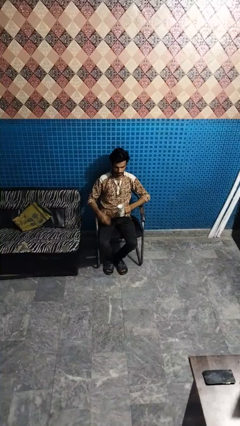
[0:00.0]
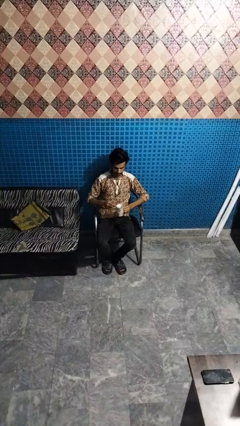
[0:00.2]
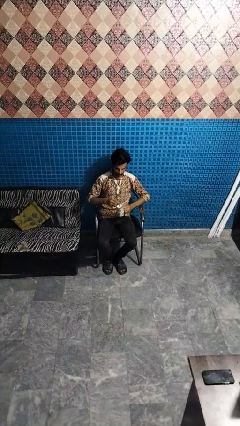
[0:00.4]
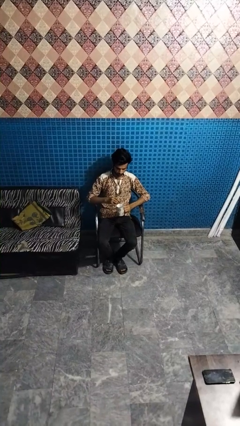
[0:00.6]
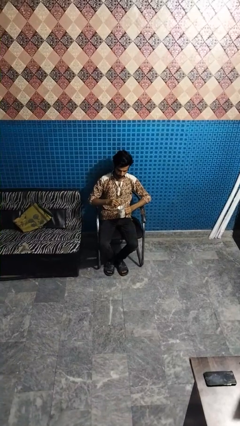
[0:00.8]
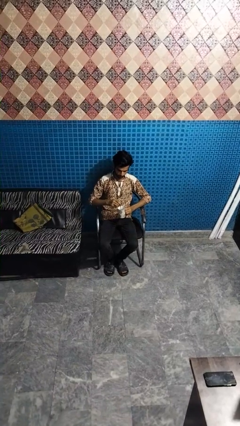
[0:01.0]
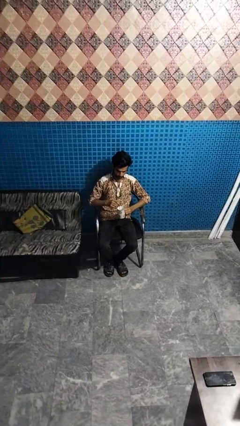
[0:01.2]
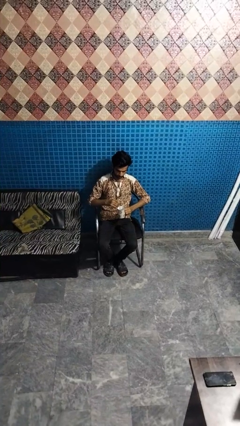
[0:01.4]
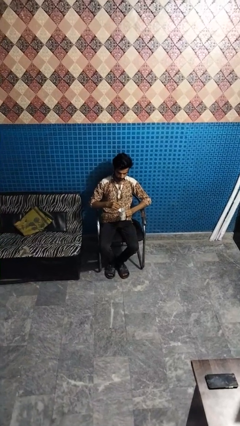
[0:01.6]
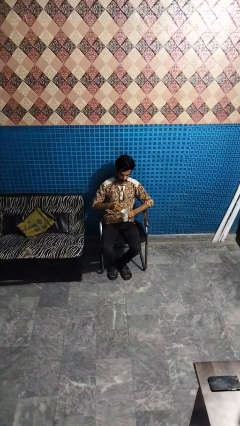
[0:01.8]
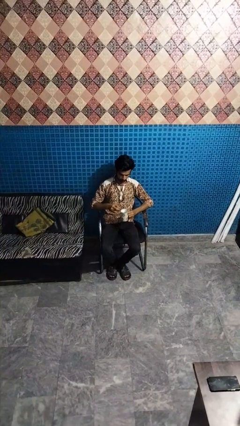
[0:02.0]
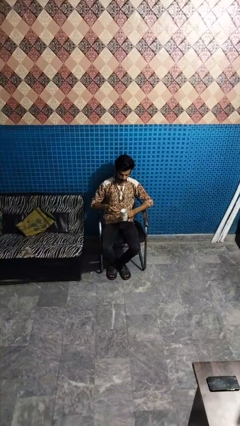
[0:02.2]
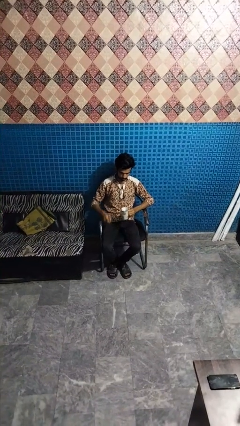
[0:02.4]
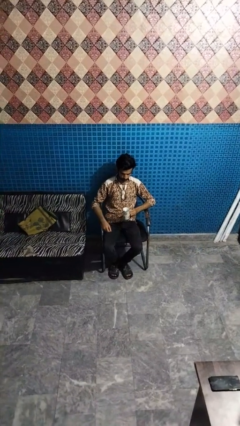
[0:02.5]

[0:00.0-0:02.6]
person stirs mug

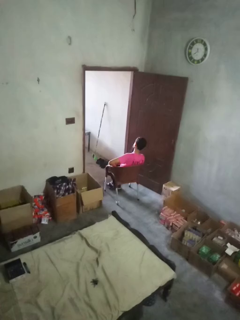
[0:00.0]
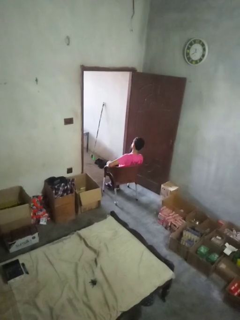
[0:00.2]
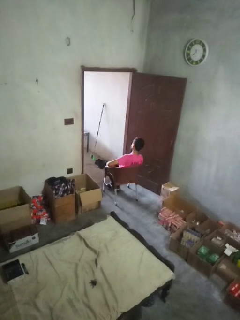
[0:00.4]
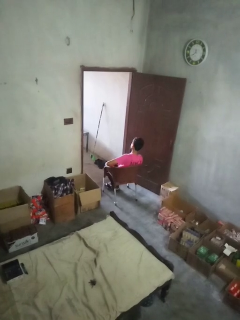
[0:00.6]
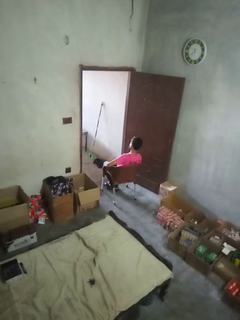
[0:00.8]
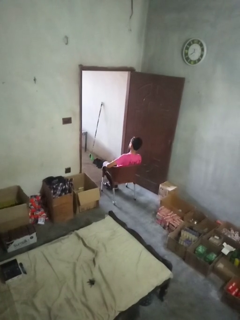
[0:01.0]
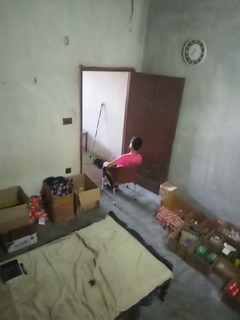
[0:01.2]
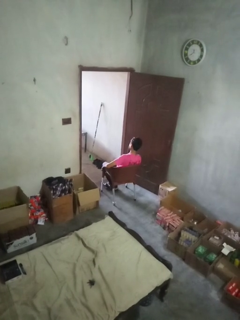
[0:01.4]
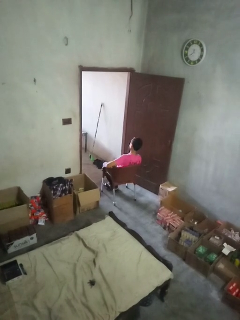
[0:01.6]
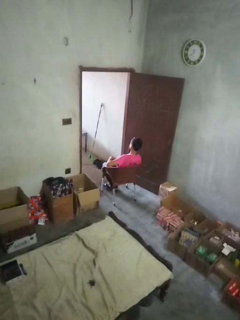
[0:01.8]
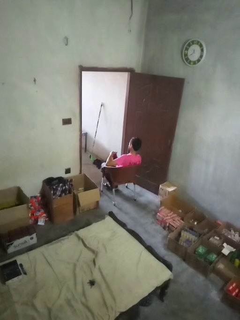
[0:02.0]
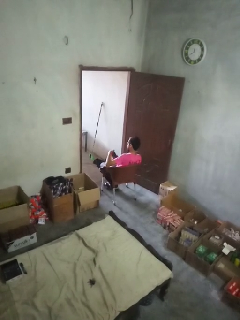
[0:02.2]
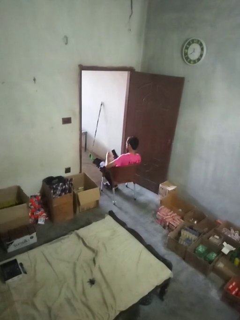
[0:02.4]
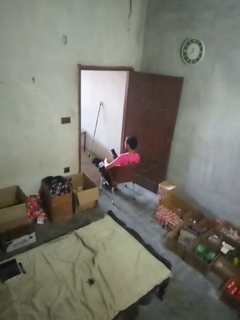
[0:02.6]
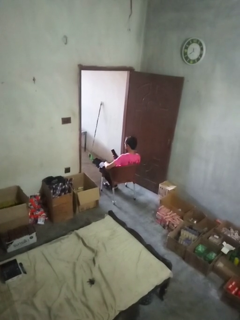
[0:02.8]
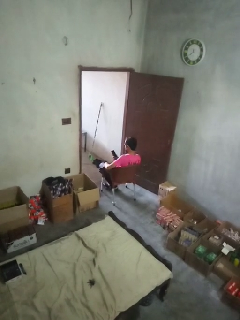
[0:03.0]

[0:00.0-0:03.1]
person takes phone from pocket

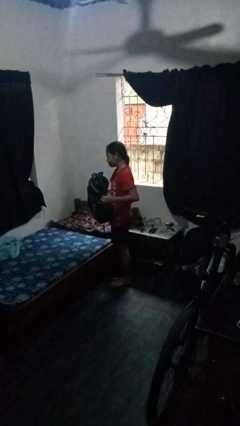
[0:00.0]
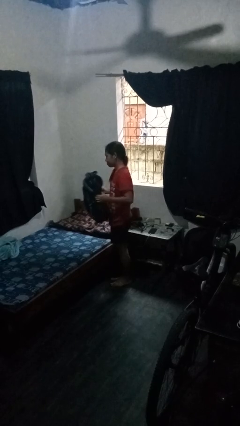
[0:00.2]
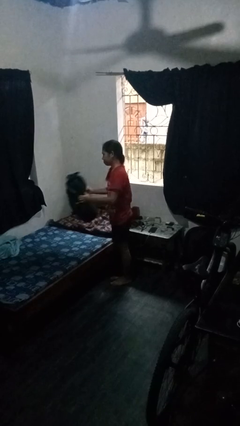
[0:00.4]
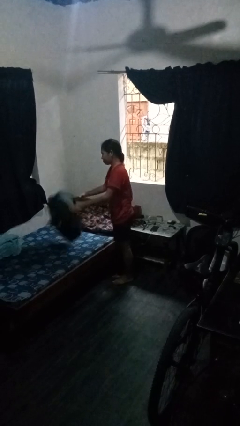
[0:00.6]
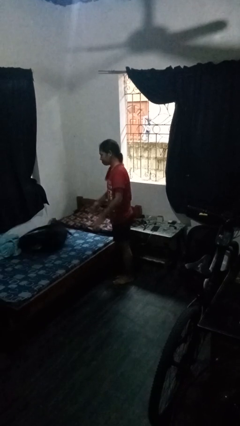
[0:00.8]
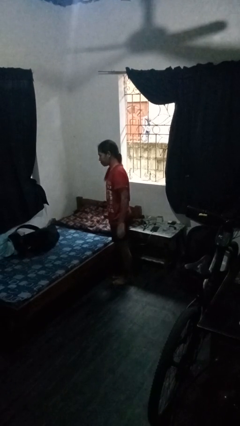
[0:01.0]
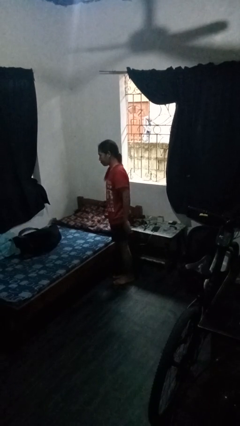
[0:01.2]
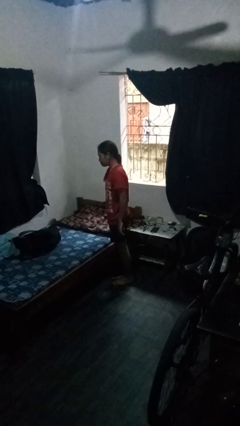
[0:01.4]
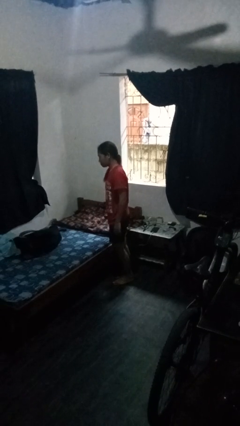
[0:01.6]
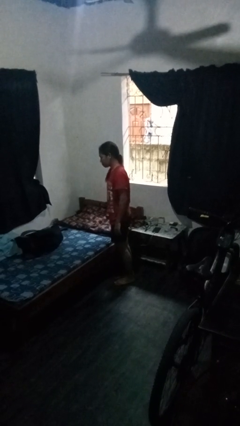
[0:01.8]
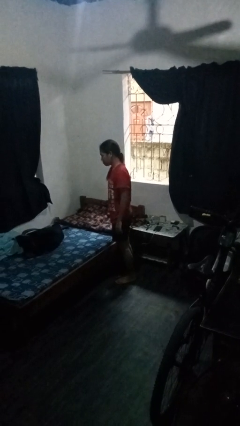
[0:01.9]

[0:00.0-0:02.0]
person throws object on bed

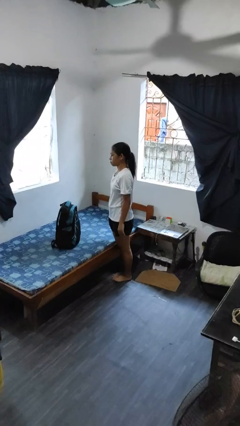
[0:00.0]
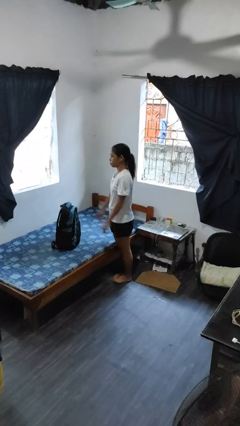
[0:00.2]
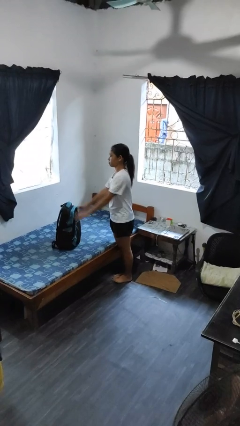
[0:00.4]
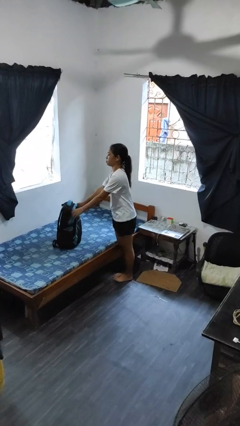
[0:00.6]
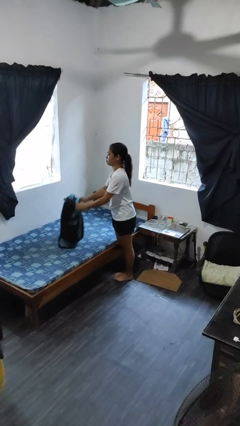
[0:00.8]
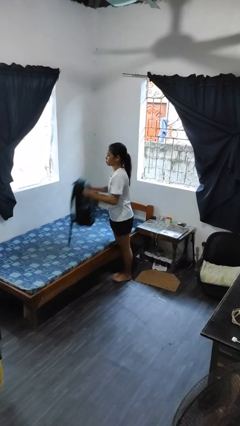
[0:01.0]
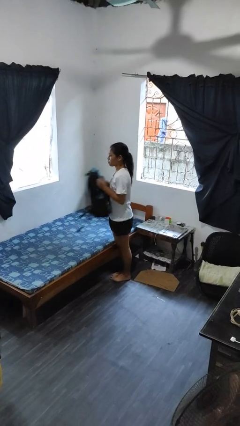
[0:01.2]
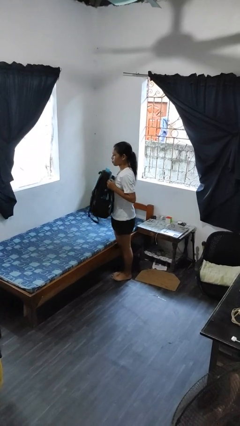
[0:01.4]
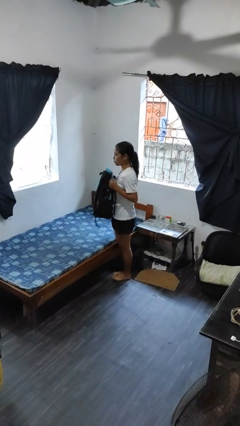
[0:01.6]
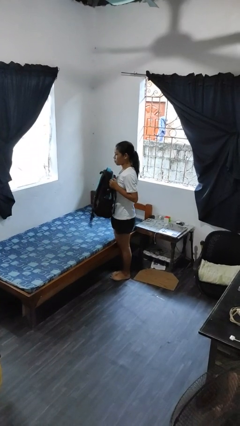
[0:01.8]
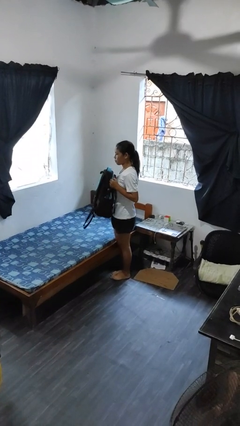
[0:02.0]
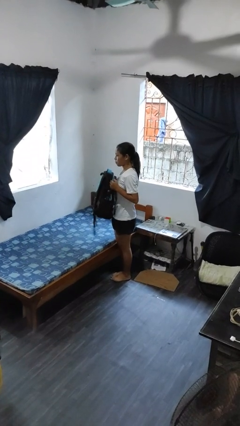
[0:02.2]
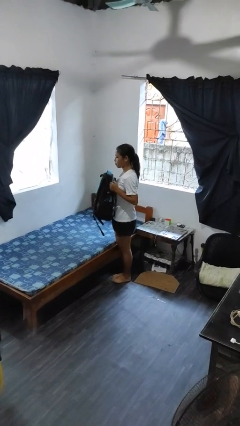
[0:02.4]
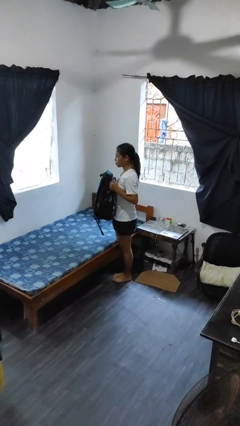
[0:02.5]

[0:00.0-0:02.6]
person picks up object from bed

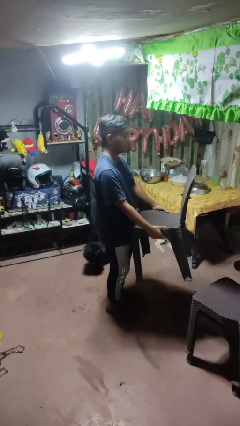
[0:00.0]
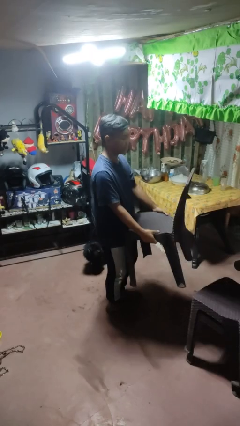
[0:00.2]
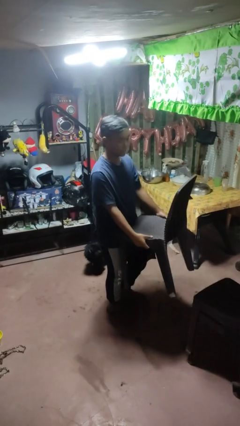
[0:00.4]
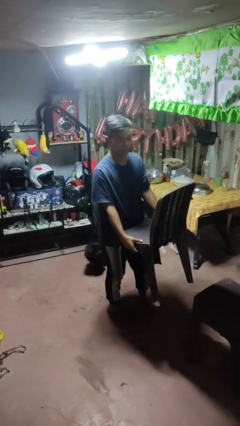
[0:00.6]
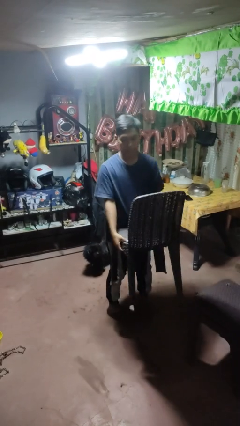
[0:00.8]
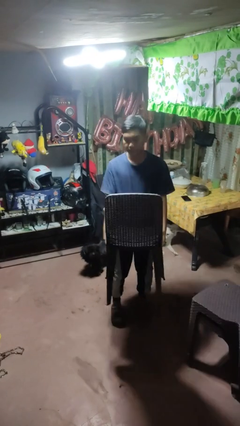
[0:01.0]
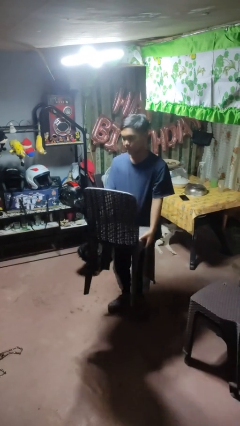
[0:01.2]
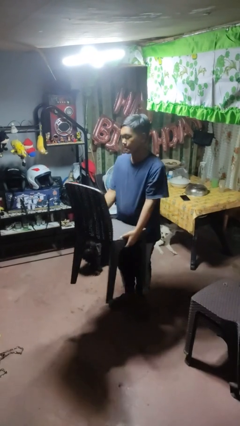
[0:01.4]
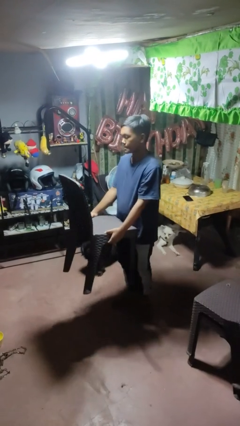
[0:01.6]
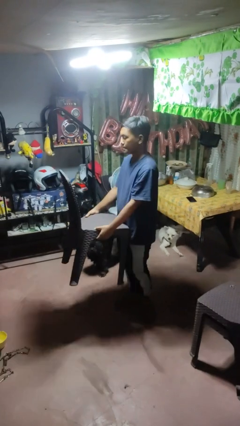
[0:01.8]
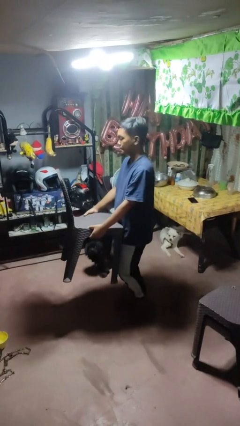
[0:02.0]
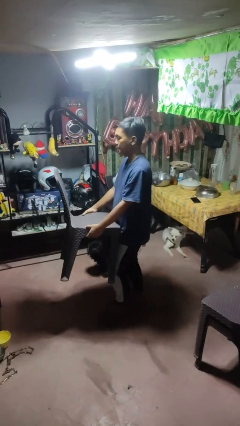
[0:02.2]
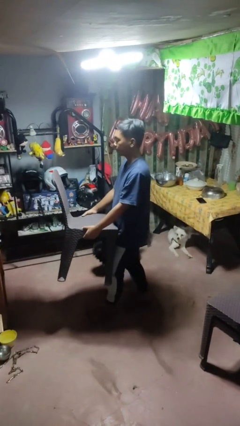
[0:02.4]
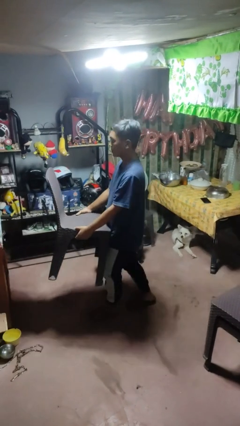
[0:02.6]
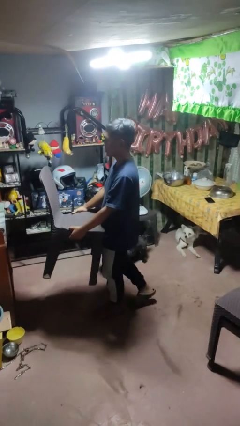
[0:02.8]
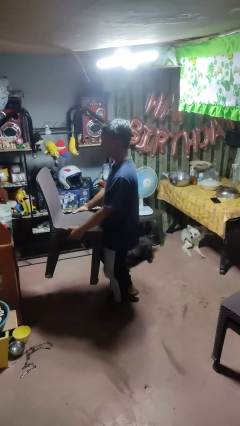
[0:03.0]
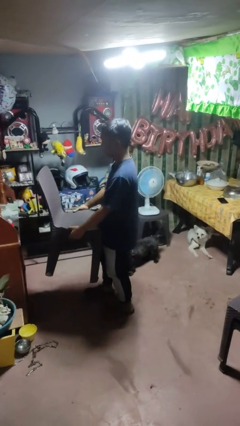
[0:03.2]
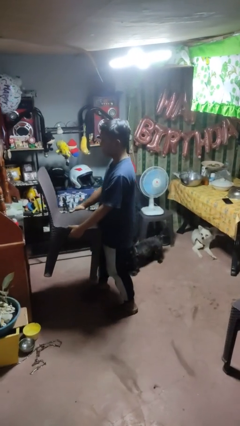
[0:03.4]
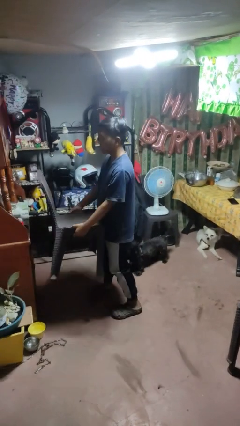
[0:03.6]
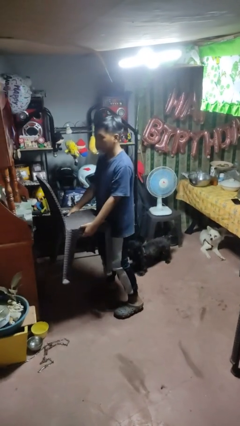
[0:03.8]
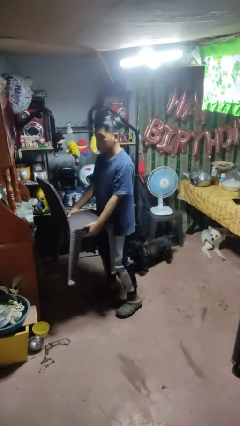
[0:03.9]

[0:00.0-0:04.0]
person carries furniture

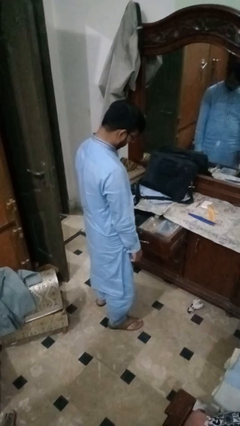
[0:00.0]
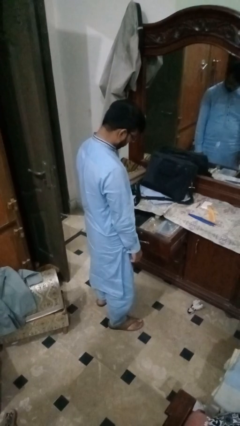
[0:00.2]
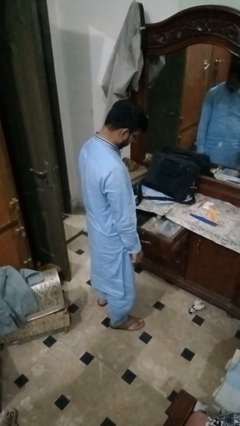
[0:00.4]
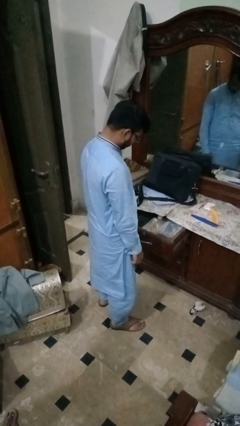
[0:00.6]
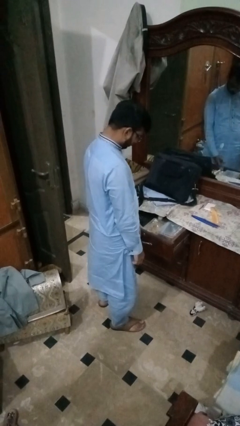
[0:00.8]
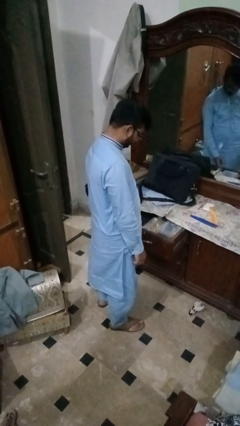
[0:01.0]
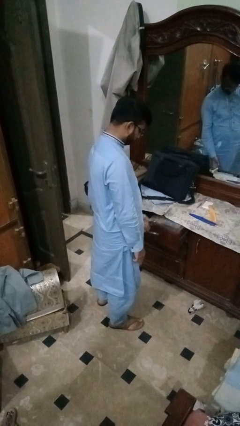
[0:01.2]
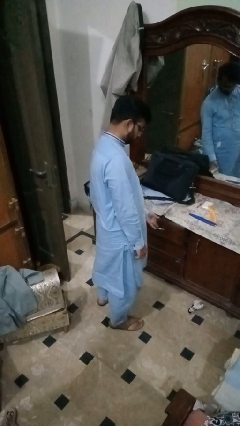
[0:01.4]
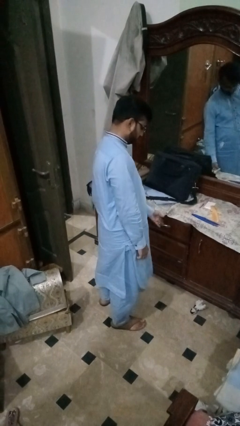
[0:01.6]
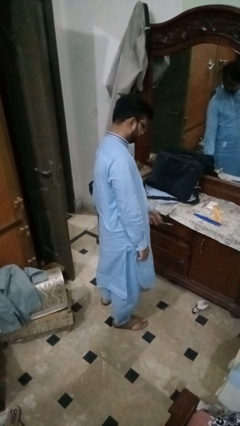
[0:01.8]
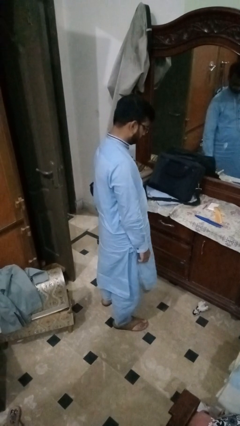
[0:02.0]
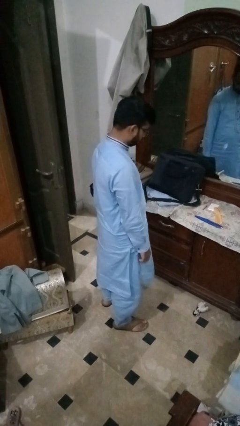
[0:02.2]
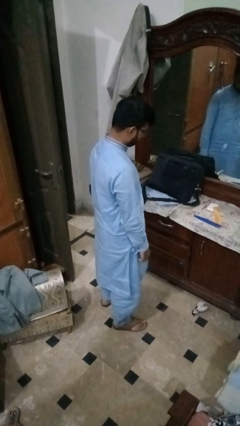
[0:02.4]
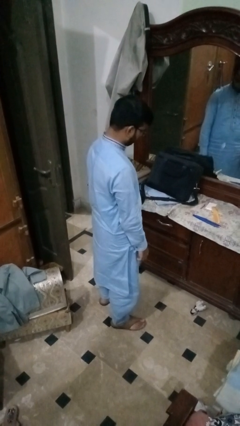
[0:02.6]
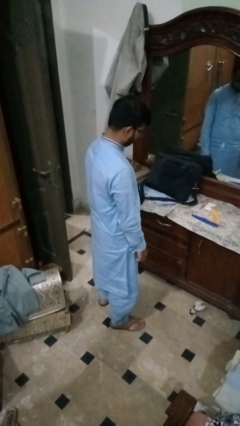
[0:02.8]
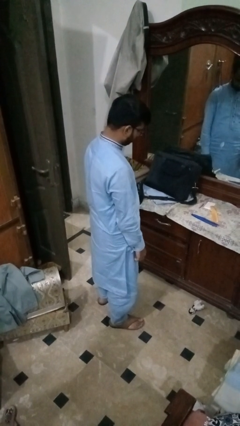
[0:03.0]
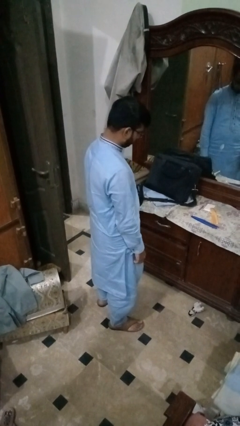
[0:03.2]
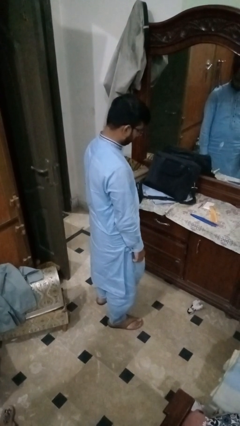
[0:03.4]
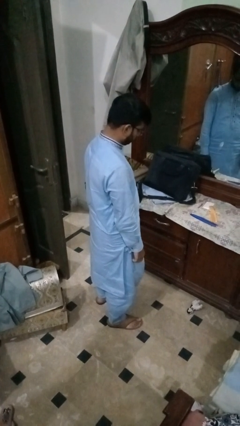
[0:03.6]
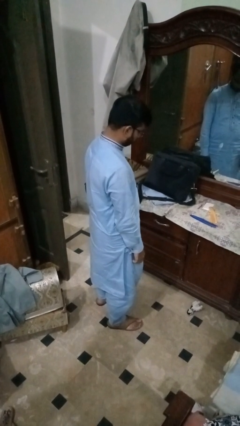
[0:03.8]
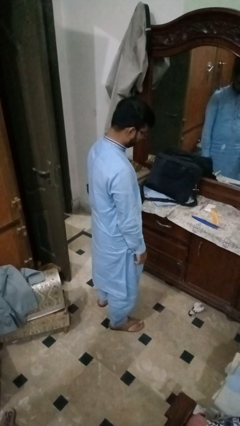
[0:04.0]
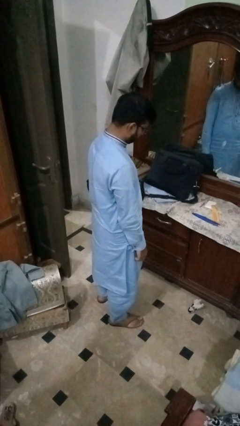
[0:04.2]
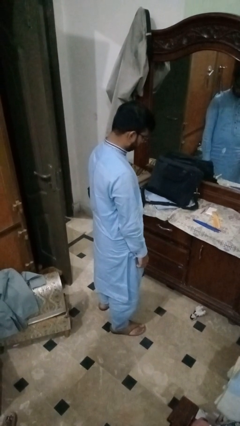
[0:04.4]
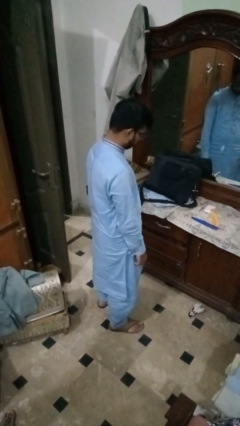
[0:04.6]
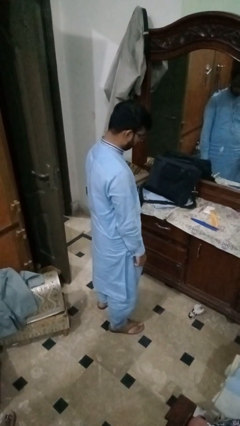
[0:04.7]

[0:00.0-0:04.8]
person closes dresser drawer
